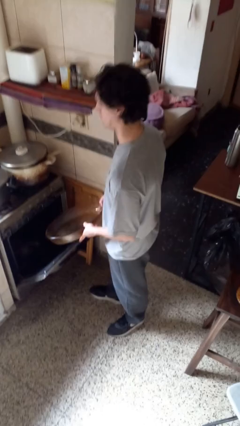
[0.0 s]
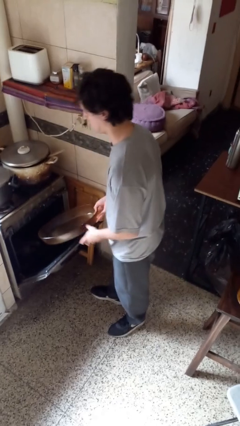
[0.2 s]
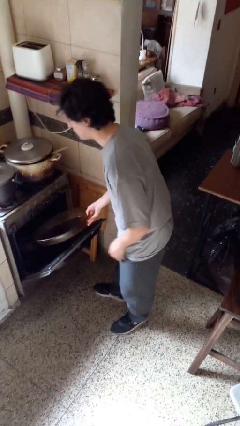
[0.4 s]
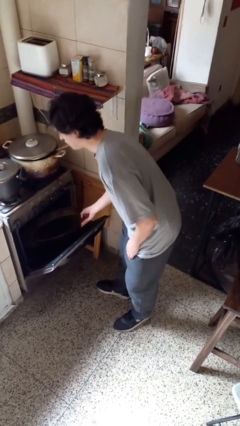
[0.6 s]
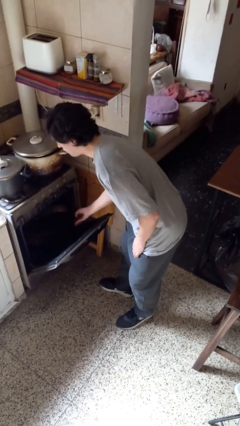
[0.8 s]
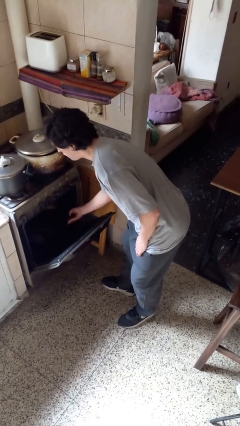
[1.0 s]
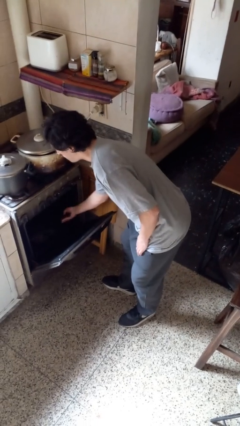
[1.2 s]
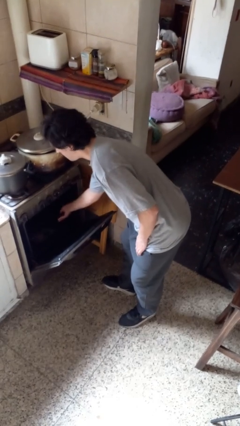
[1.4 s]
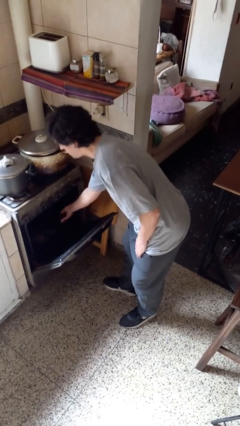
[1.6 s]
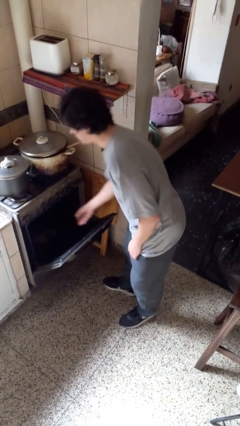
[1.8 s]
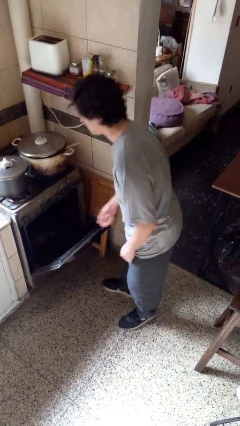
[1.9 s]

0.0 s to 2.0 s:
person puts object into oven

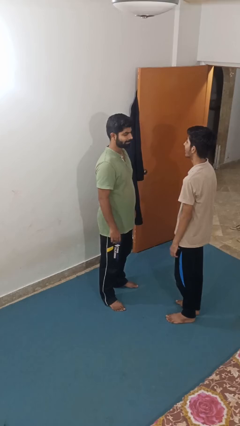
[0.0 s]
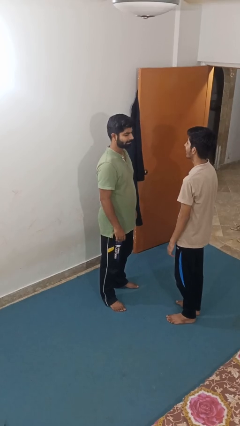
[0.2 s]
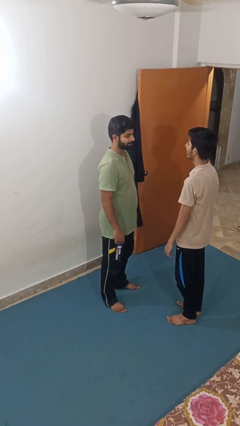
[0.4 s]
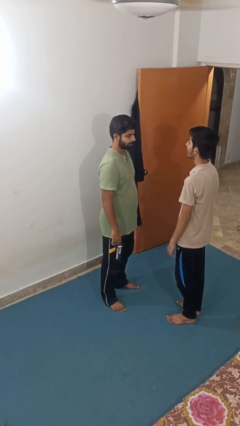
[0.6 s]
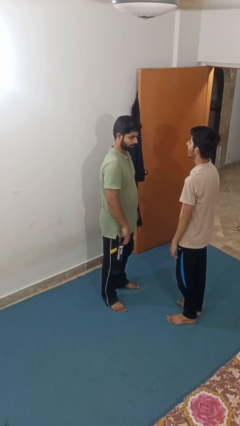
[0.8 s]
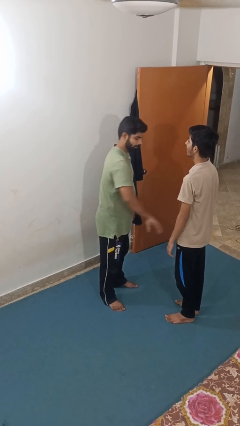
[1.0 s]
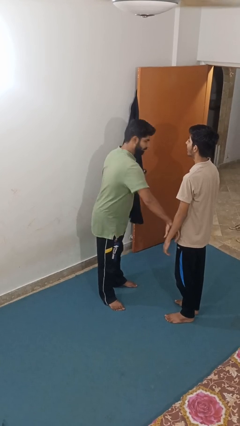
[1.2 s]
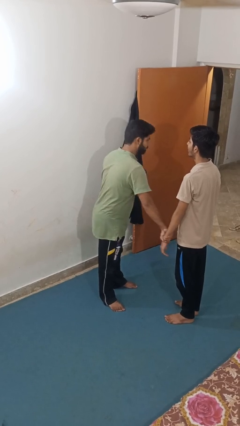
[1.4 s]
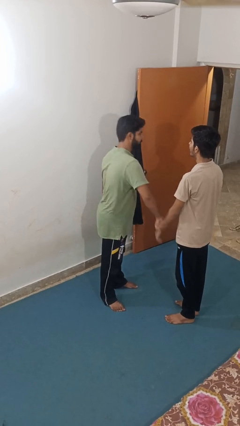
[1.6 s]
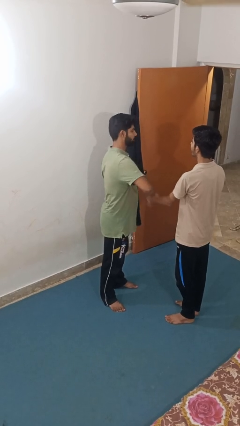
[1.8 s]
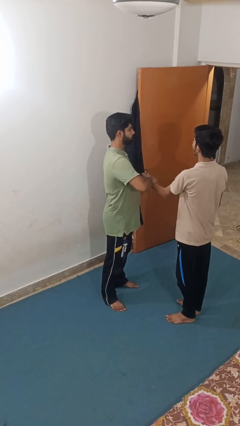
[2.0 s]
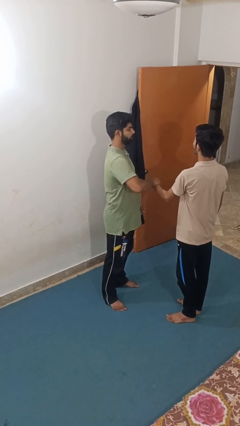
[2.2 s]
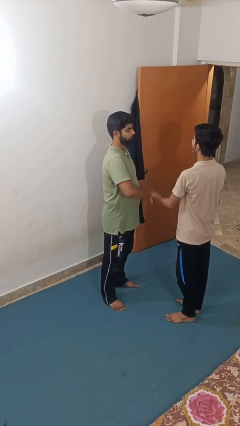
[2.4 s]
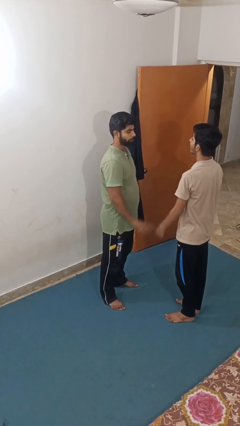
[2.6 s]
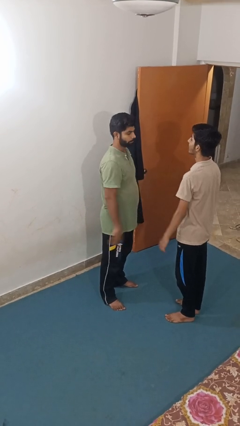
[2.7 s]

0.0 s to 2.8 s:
person grabs person by forearm

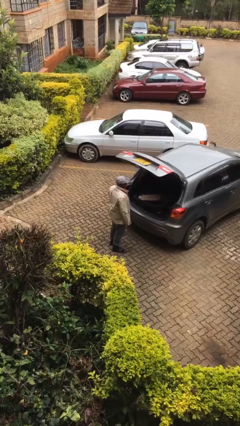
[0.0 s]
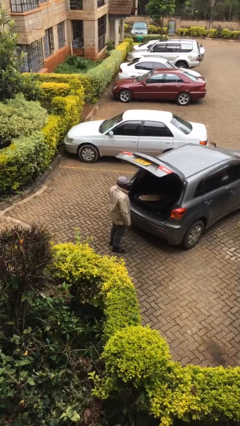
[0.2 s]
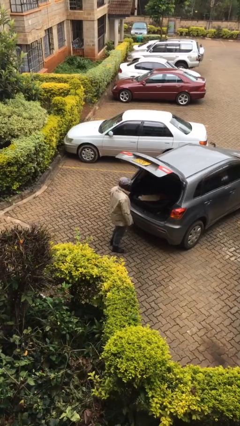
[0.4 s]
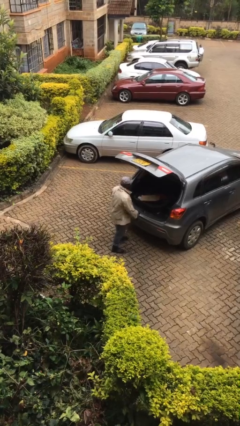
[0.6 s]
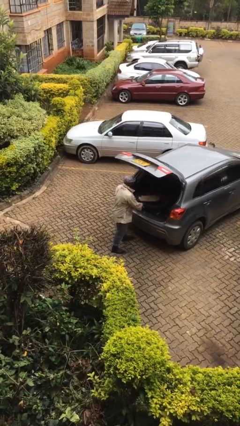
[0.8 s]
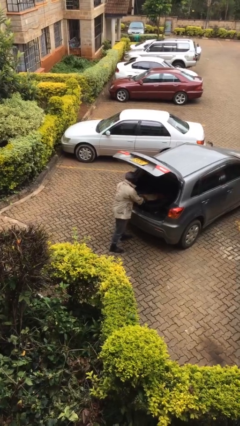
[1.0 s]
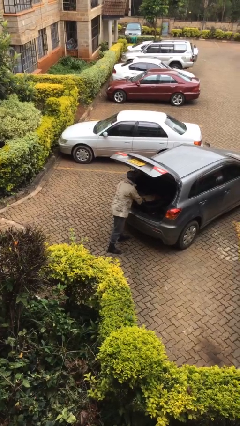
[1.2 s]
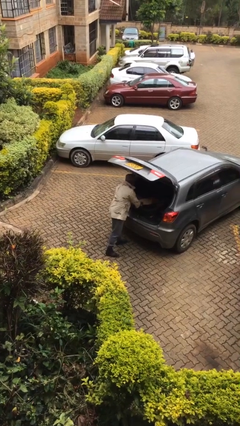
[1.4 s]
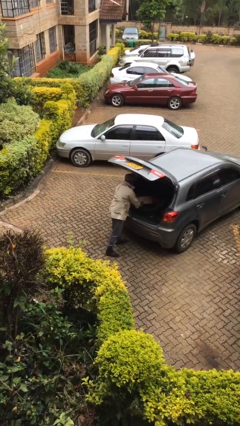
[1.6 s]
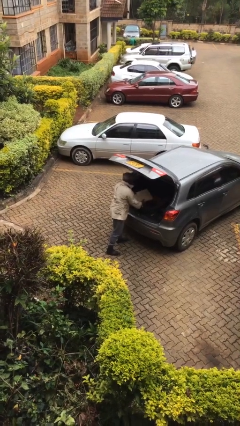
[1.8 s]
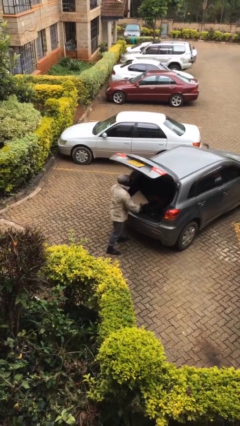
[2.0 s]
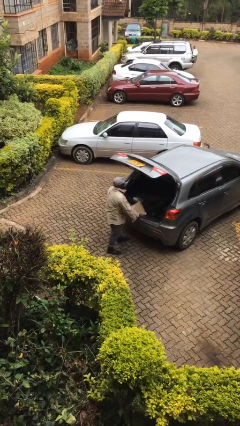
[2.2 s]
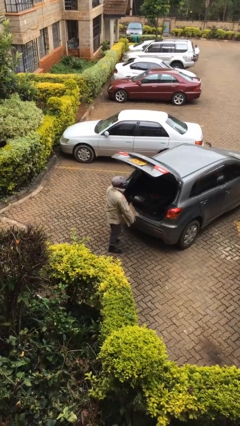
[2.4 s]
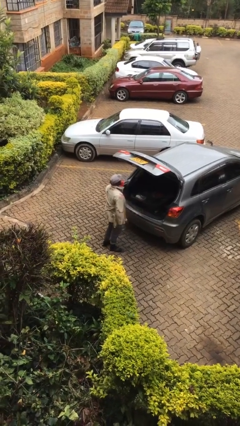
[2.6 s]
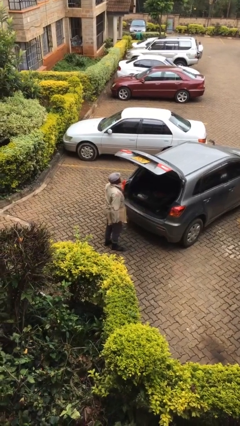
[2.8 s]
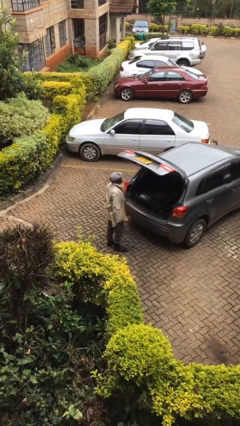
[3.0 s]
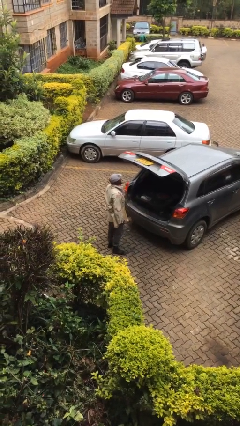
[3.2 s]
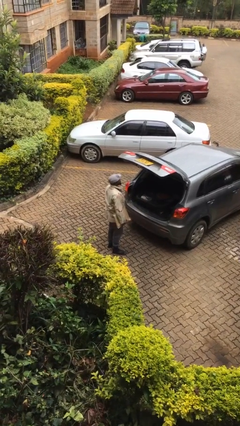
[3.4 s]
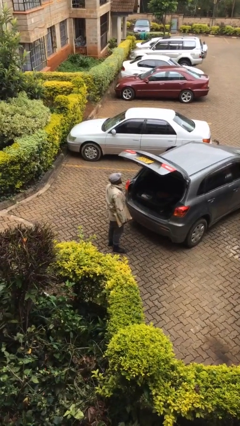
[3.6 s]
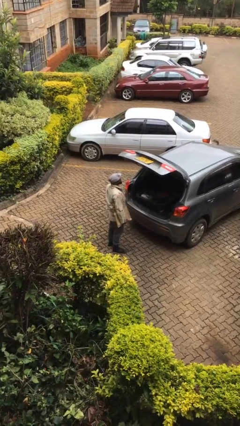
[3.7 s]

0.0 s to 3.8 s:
person unloads car

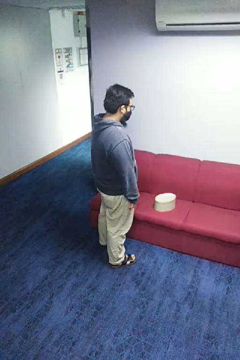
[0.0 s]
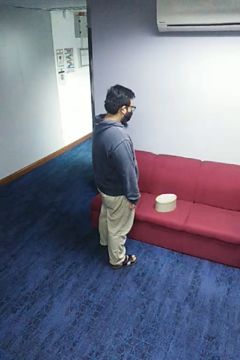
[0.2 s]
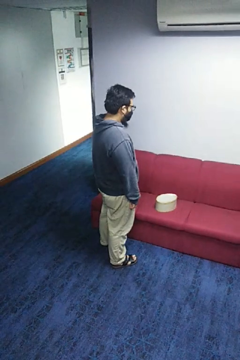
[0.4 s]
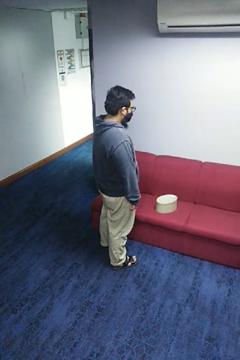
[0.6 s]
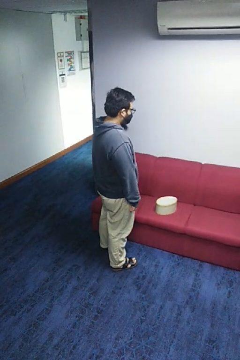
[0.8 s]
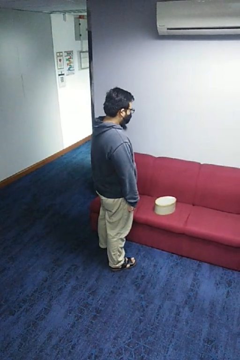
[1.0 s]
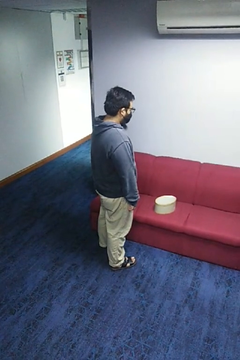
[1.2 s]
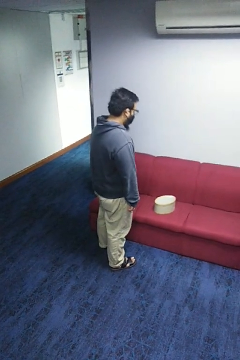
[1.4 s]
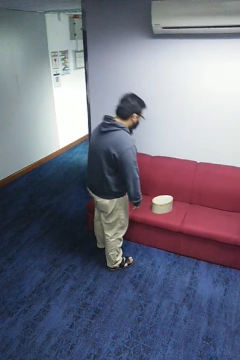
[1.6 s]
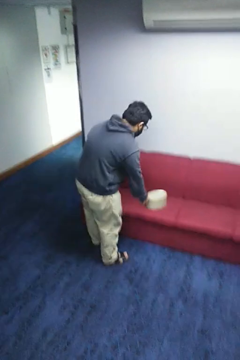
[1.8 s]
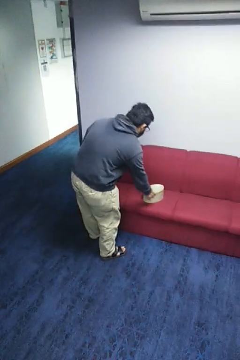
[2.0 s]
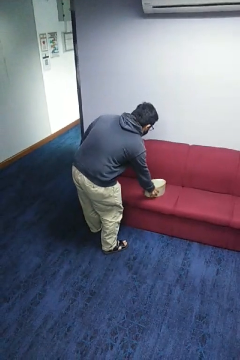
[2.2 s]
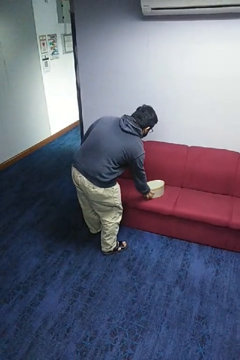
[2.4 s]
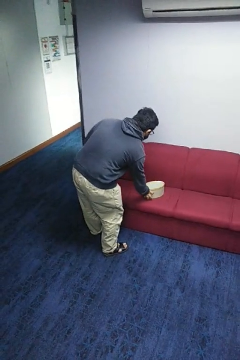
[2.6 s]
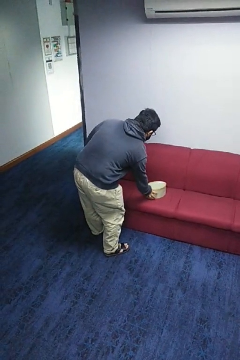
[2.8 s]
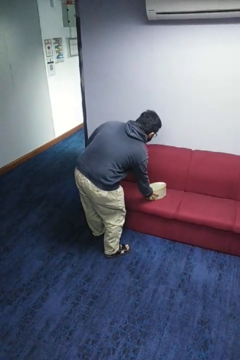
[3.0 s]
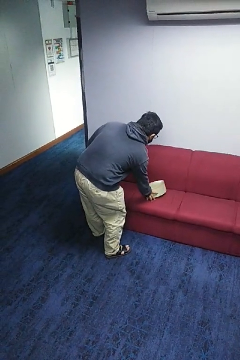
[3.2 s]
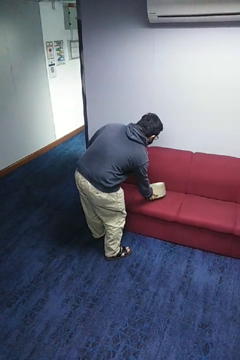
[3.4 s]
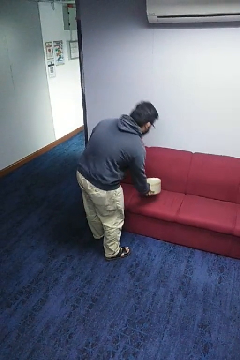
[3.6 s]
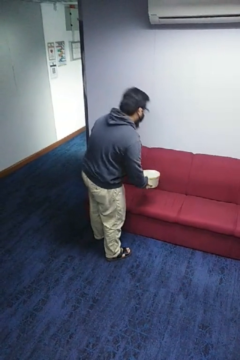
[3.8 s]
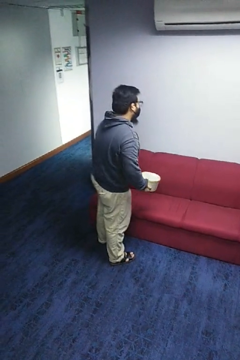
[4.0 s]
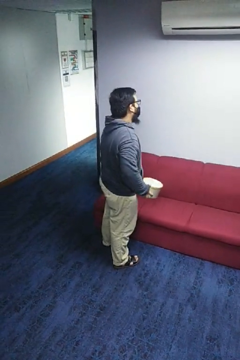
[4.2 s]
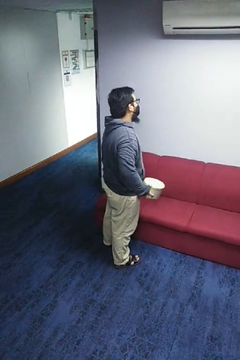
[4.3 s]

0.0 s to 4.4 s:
person picks up object from couch

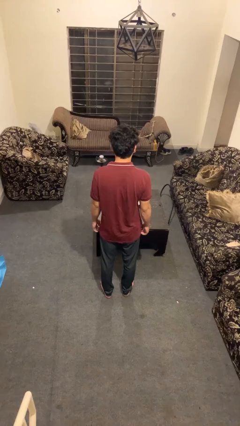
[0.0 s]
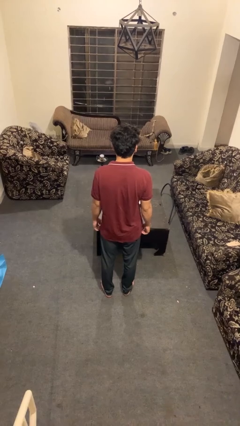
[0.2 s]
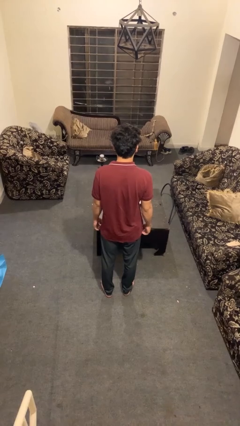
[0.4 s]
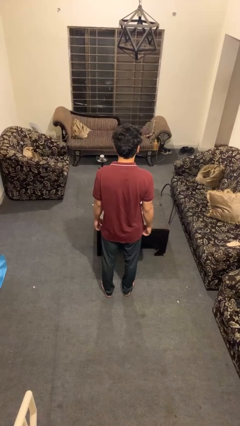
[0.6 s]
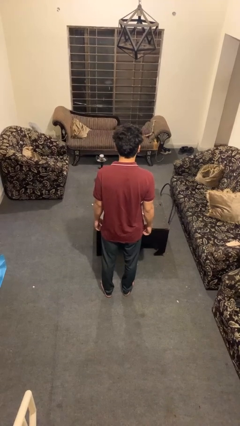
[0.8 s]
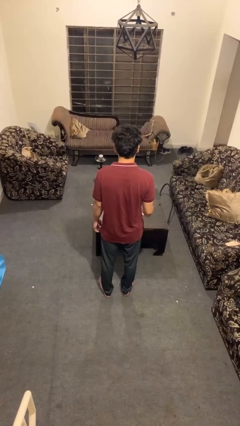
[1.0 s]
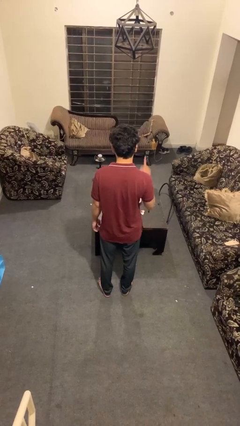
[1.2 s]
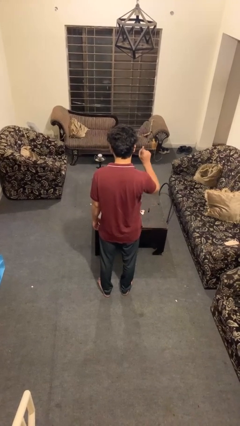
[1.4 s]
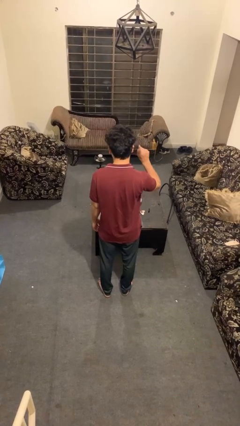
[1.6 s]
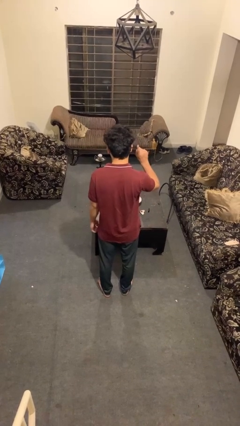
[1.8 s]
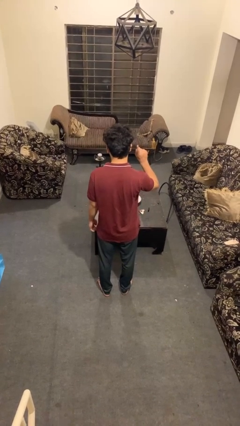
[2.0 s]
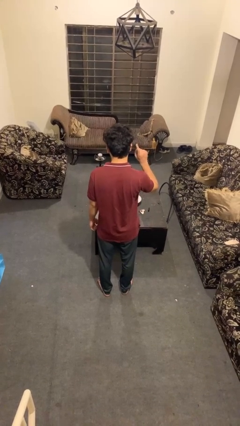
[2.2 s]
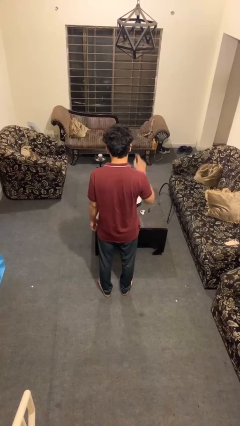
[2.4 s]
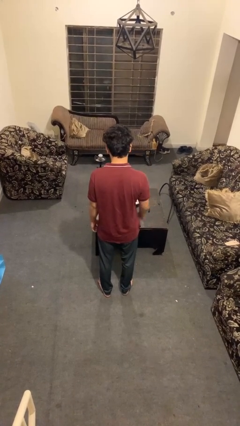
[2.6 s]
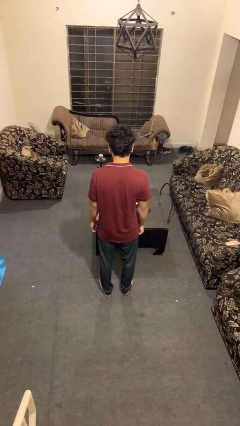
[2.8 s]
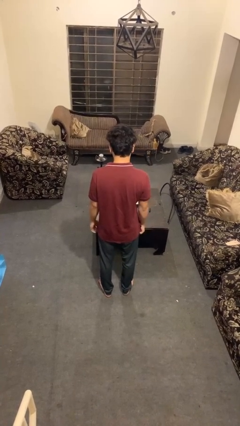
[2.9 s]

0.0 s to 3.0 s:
person gestures number one

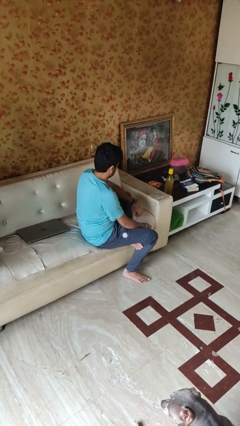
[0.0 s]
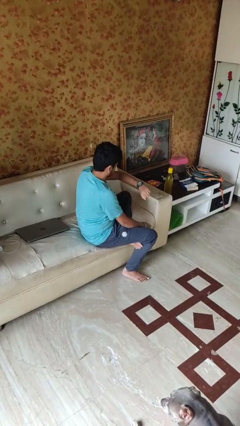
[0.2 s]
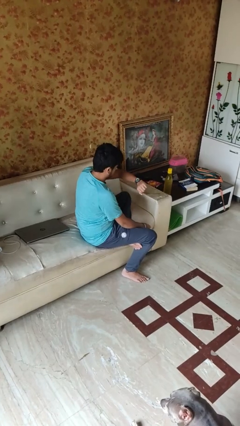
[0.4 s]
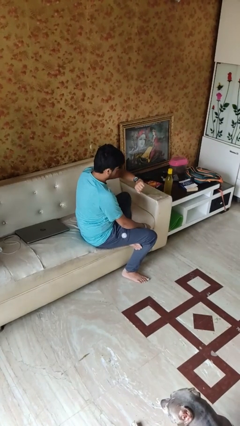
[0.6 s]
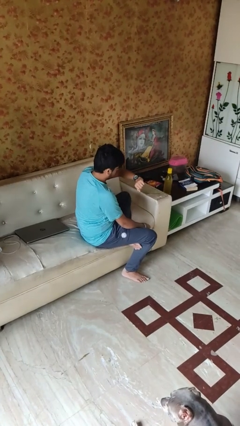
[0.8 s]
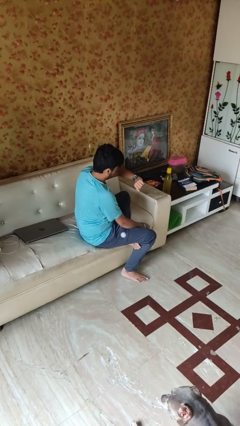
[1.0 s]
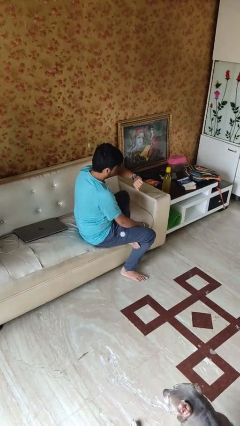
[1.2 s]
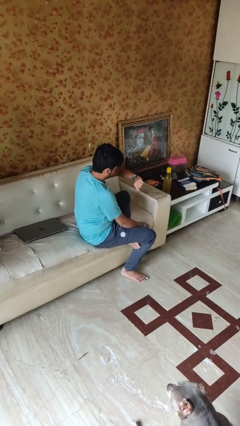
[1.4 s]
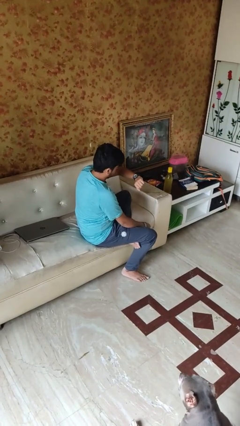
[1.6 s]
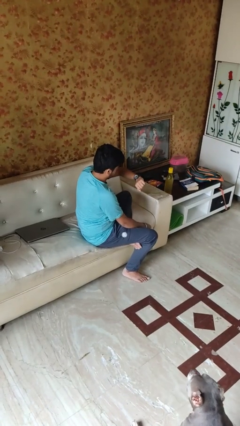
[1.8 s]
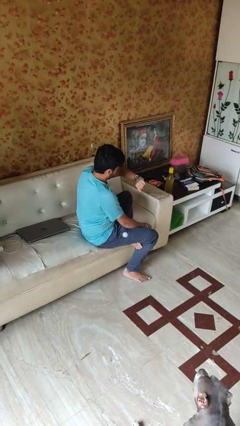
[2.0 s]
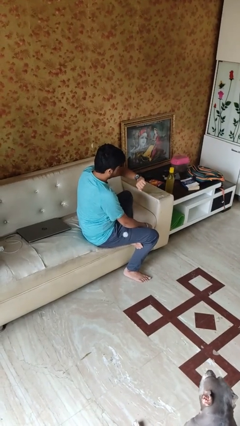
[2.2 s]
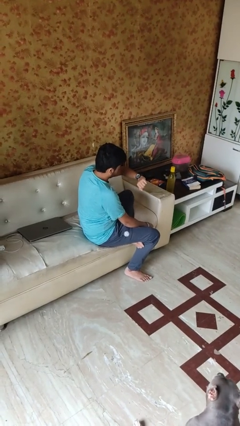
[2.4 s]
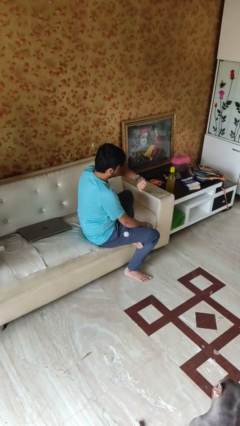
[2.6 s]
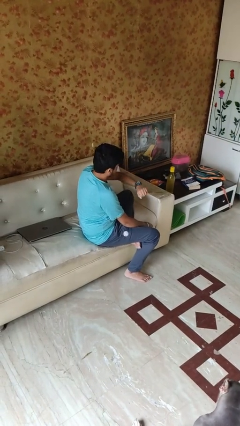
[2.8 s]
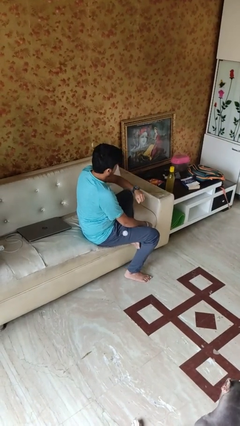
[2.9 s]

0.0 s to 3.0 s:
person looks at wristwatch
